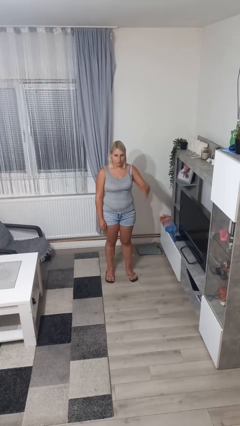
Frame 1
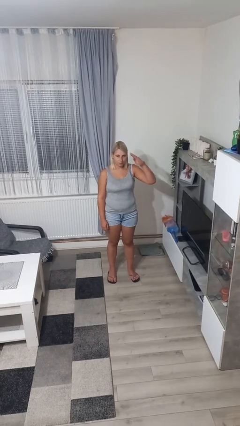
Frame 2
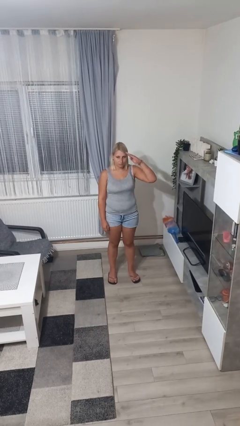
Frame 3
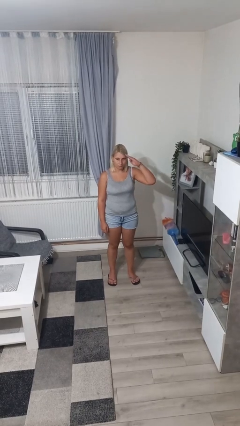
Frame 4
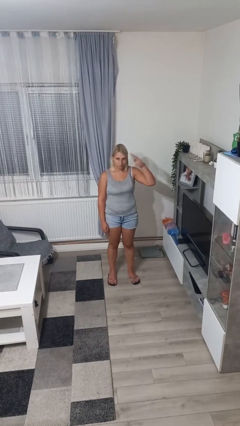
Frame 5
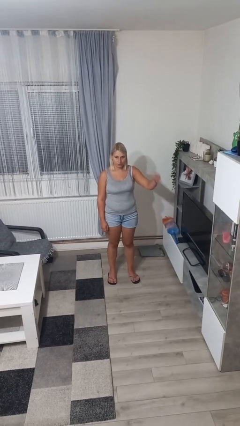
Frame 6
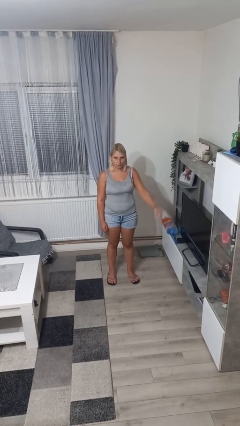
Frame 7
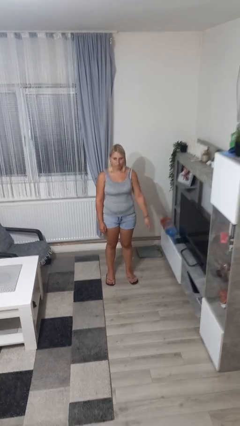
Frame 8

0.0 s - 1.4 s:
person salutes

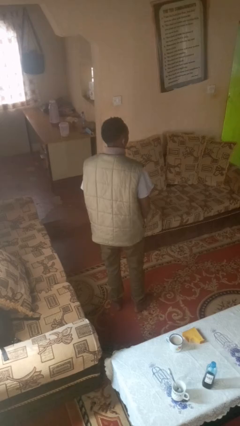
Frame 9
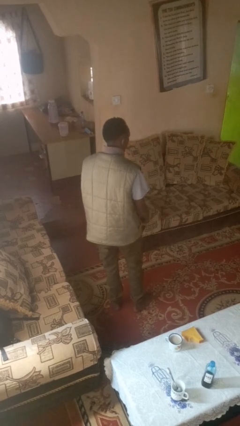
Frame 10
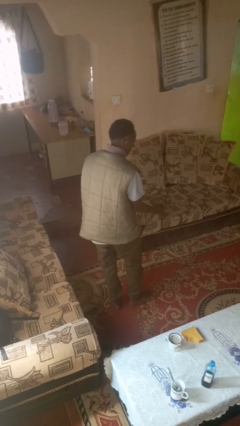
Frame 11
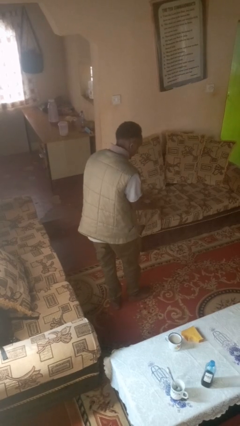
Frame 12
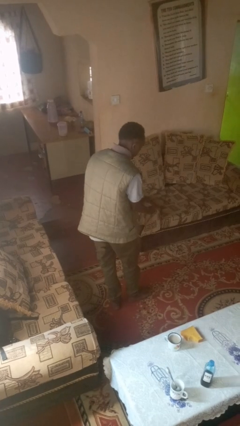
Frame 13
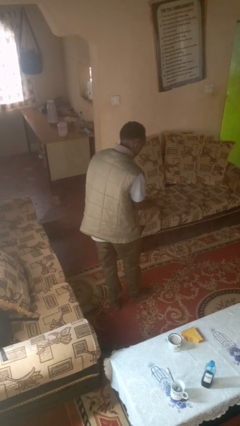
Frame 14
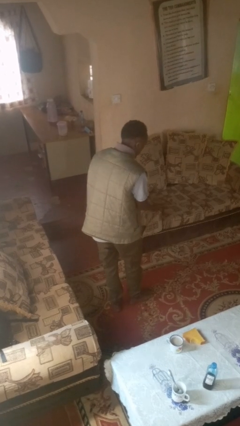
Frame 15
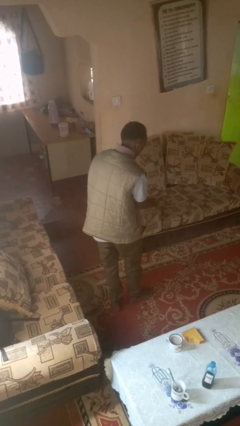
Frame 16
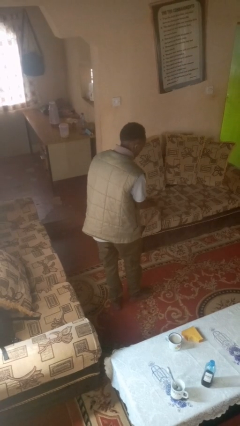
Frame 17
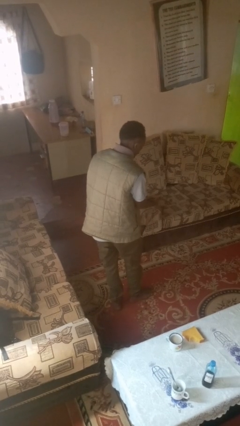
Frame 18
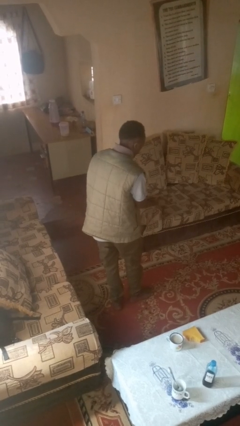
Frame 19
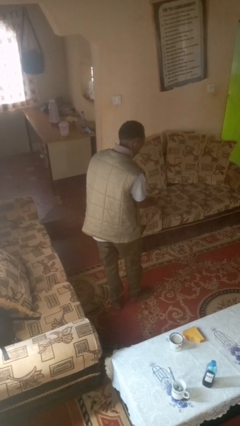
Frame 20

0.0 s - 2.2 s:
person claps hands

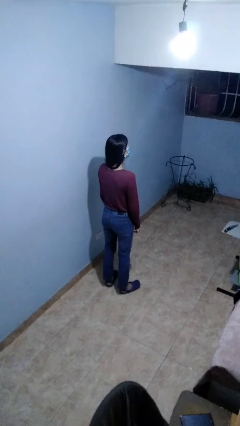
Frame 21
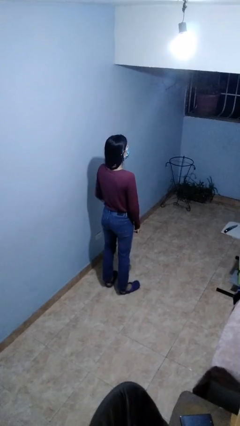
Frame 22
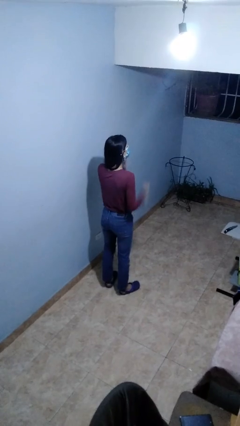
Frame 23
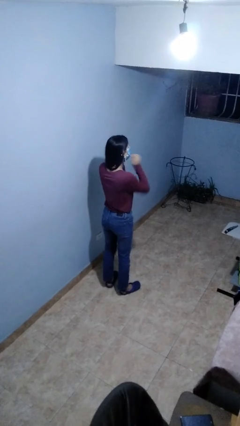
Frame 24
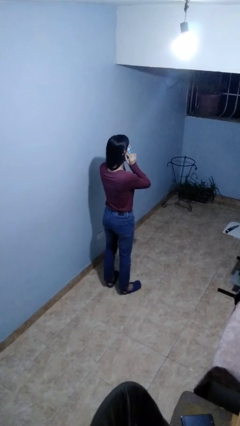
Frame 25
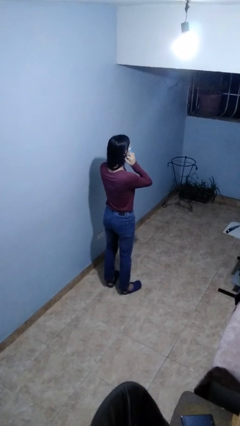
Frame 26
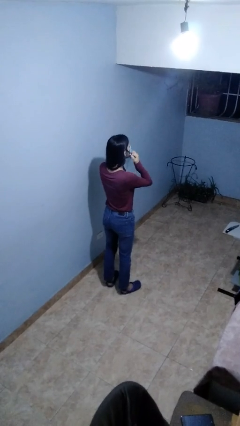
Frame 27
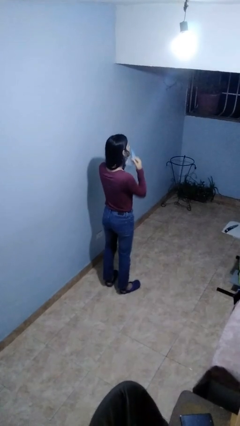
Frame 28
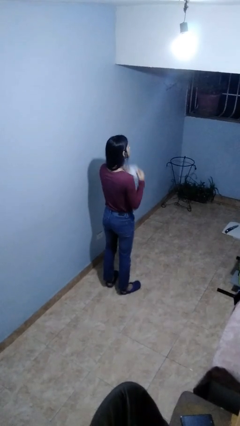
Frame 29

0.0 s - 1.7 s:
person takes off facemask

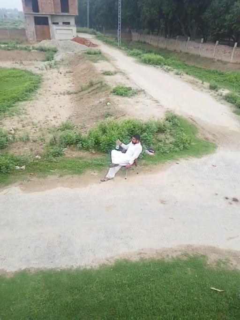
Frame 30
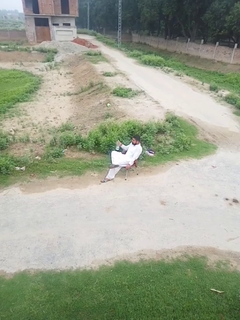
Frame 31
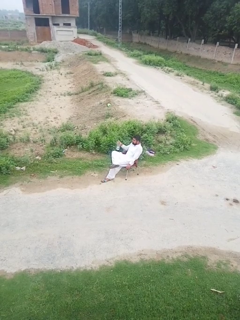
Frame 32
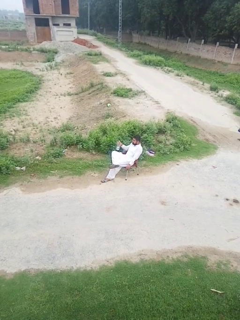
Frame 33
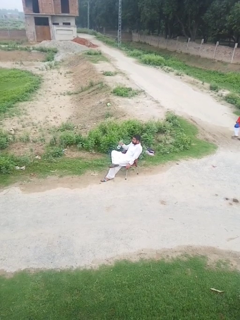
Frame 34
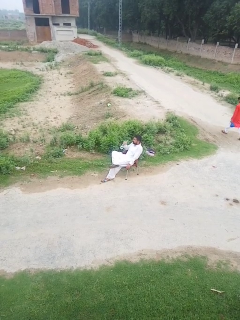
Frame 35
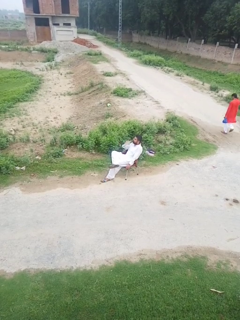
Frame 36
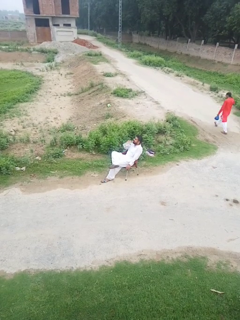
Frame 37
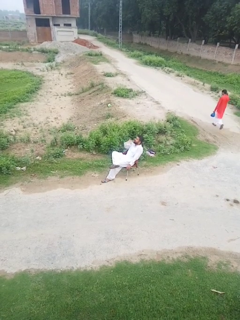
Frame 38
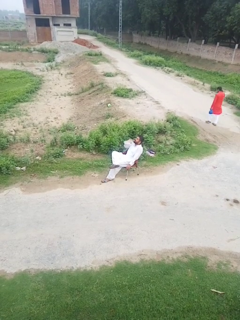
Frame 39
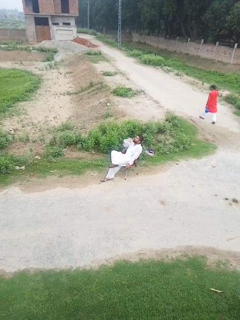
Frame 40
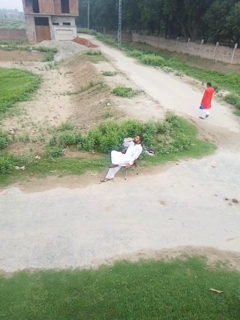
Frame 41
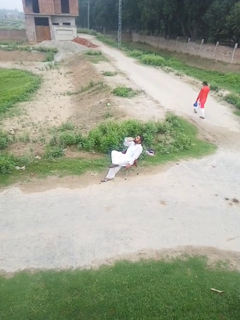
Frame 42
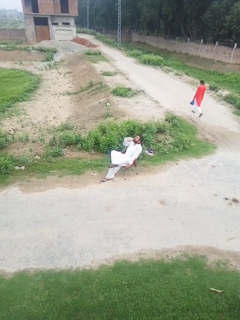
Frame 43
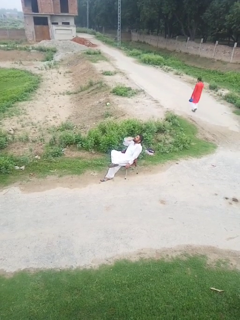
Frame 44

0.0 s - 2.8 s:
person drinks from bottle

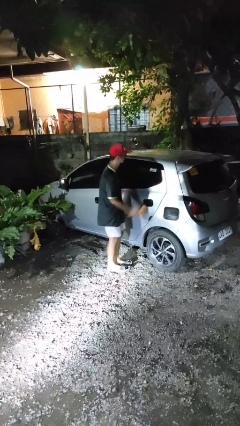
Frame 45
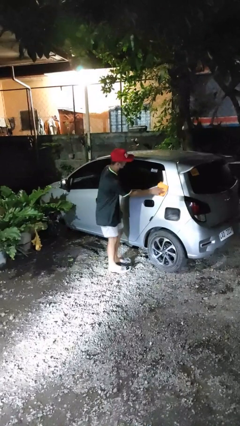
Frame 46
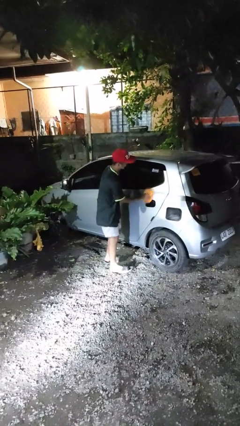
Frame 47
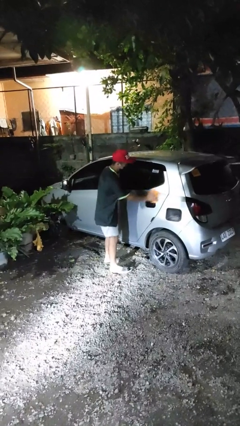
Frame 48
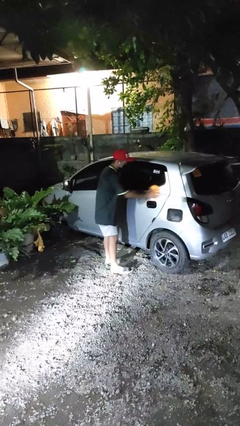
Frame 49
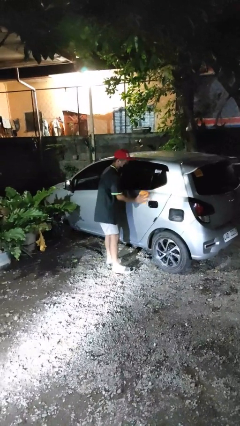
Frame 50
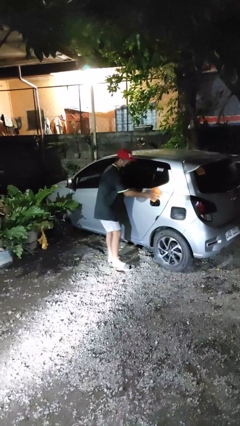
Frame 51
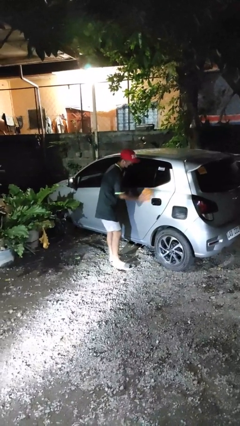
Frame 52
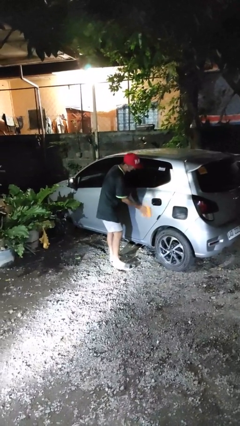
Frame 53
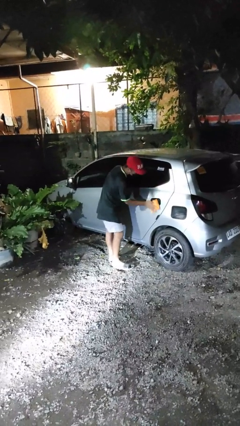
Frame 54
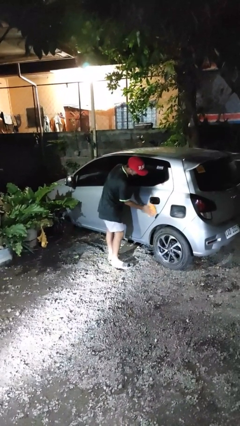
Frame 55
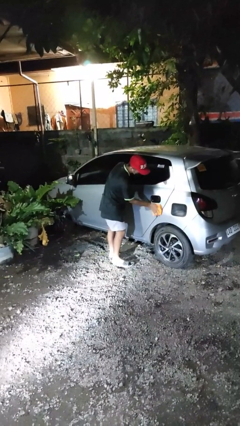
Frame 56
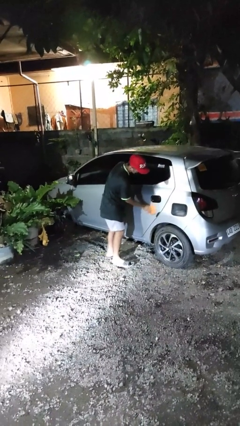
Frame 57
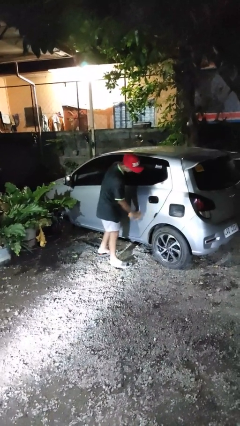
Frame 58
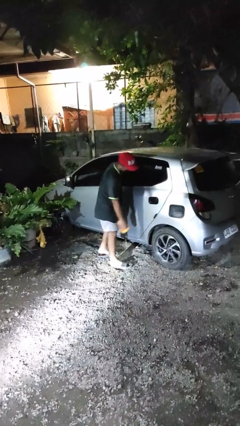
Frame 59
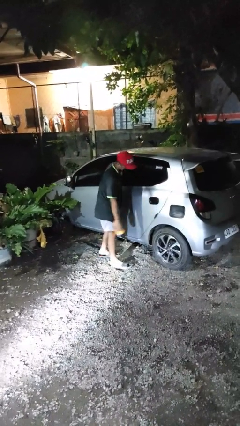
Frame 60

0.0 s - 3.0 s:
person polishes car with rag

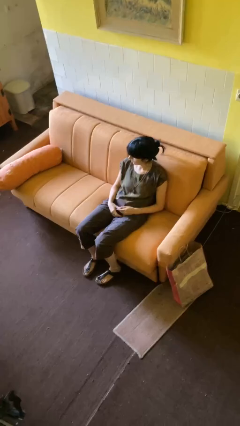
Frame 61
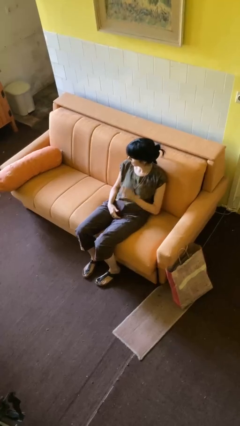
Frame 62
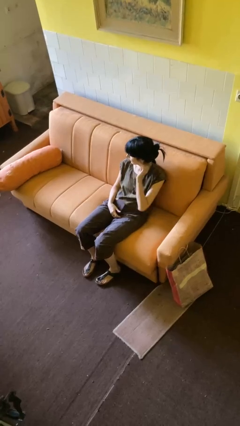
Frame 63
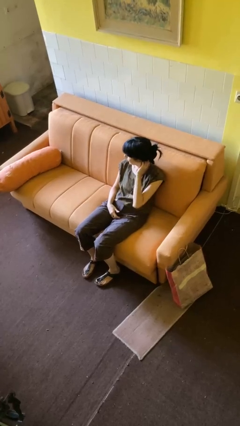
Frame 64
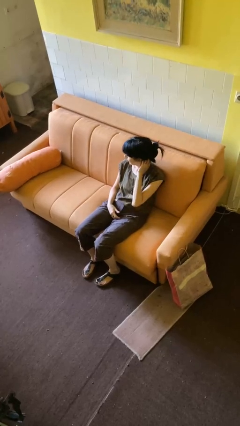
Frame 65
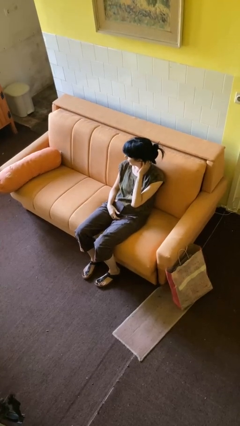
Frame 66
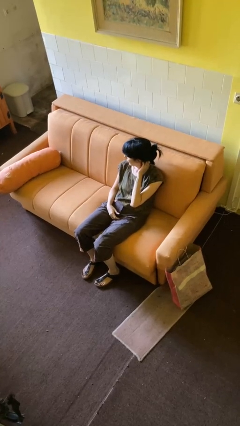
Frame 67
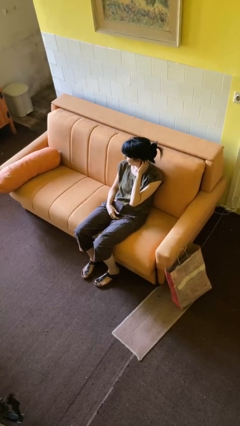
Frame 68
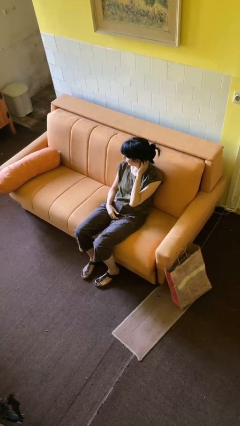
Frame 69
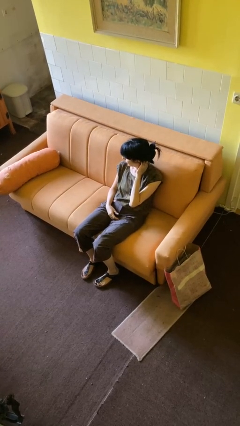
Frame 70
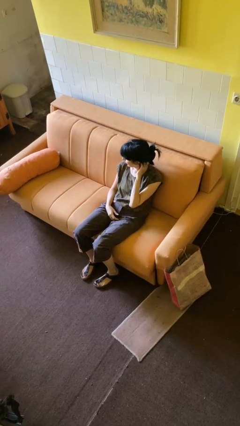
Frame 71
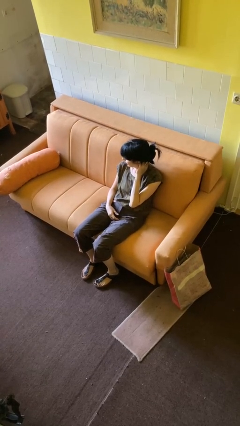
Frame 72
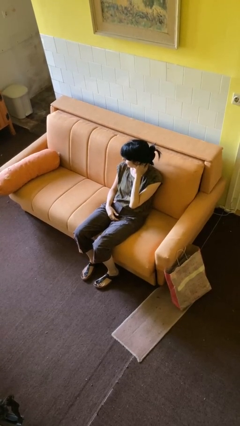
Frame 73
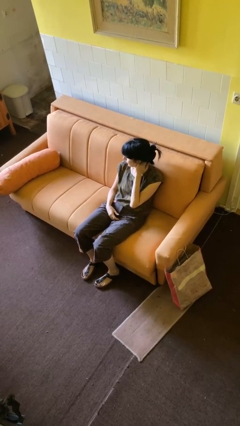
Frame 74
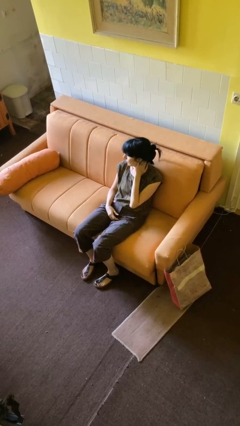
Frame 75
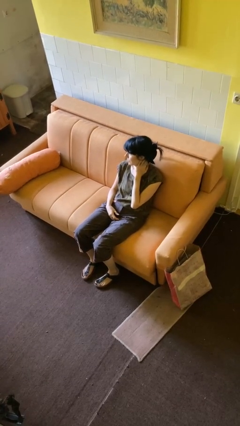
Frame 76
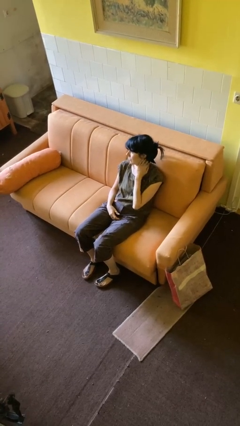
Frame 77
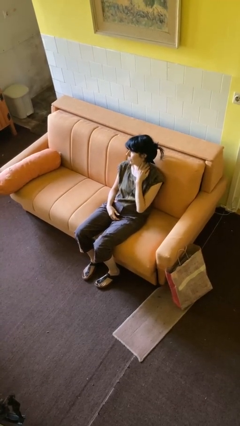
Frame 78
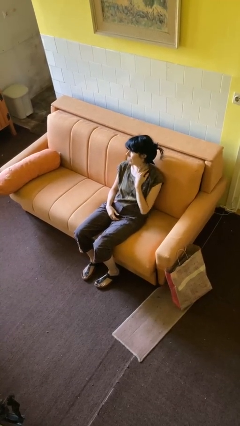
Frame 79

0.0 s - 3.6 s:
person scratches face

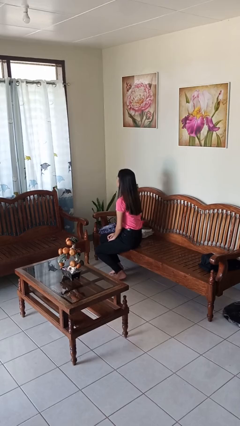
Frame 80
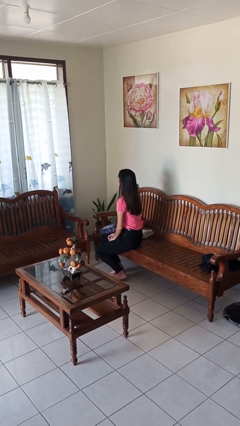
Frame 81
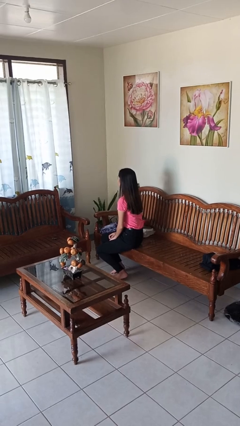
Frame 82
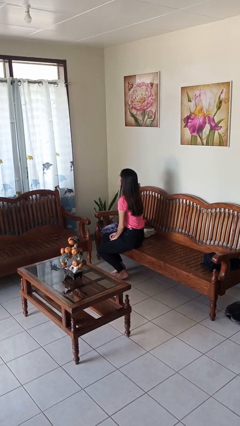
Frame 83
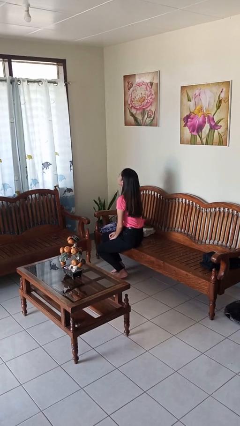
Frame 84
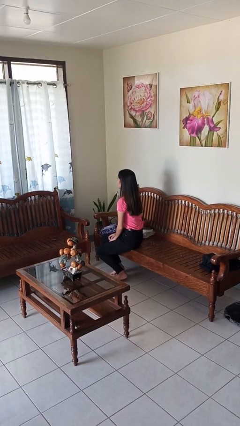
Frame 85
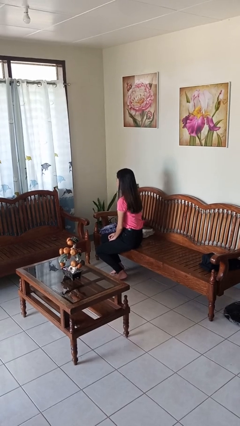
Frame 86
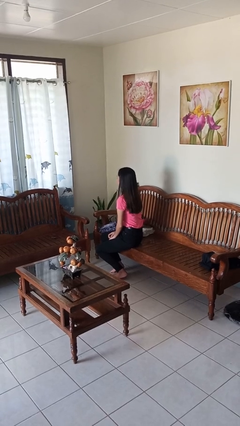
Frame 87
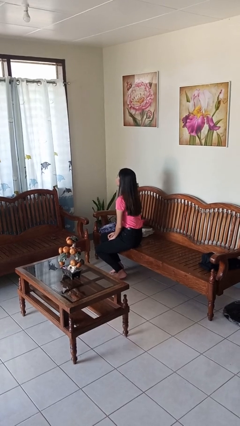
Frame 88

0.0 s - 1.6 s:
person nods head

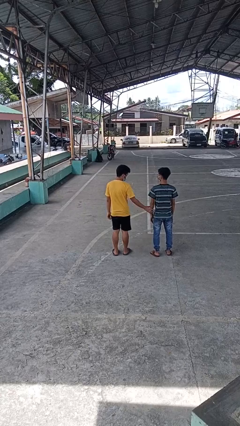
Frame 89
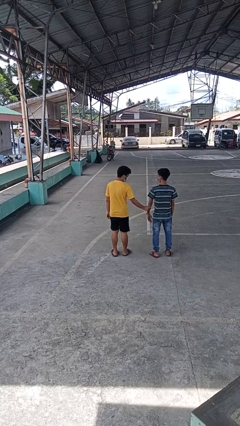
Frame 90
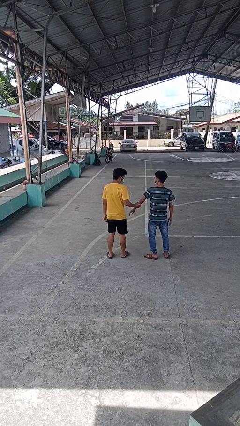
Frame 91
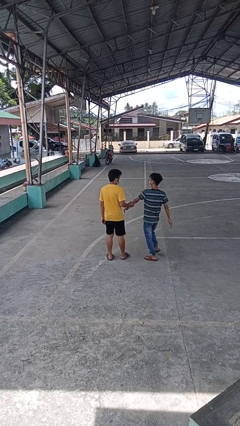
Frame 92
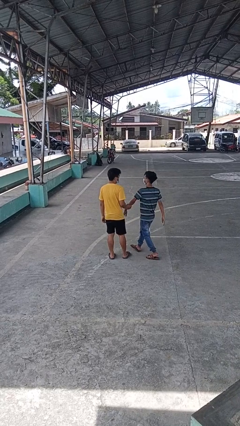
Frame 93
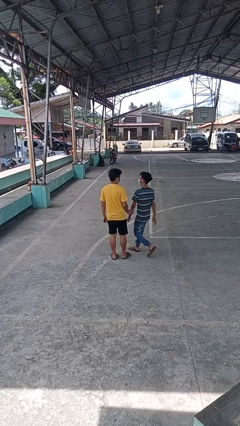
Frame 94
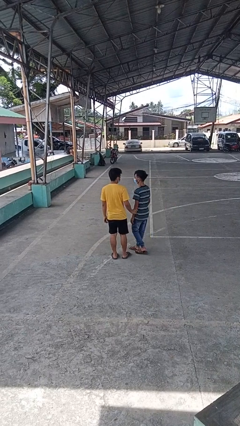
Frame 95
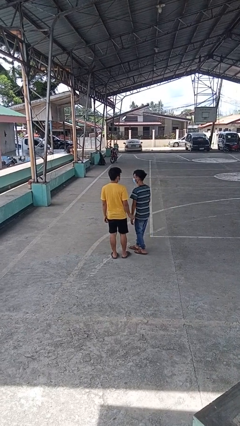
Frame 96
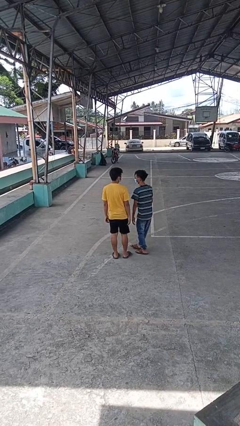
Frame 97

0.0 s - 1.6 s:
person grabs person by forearm
